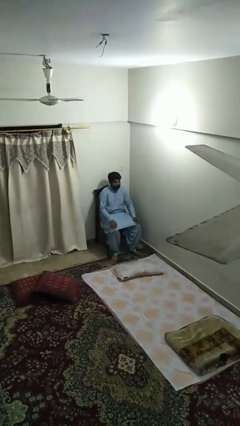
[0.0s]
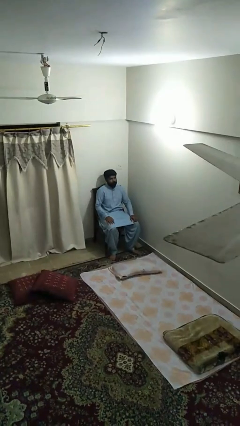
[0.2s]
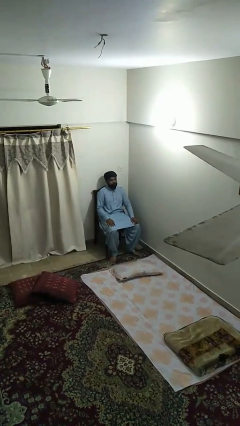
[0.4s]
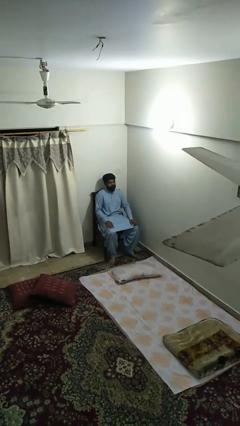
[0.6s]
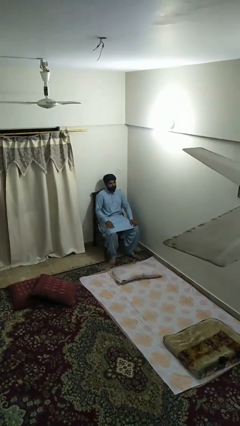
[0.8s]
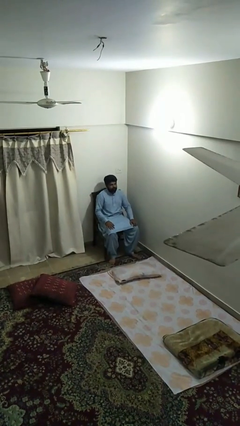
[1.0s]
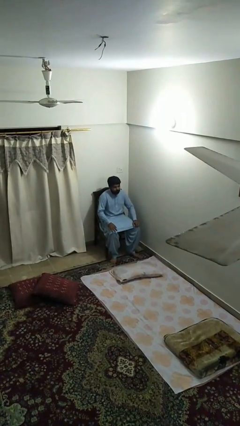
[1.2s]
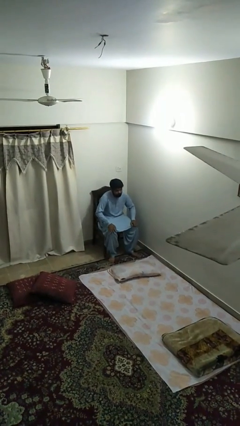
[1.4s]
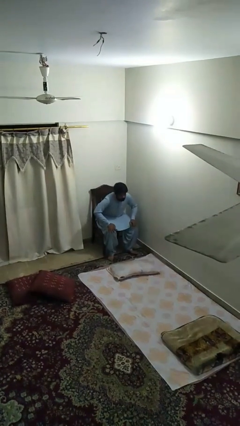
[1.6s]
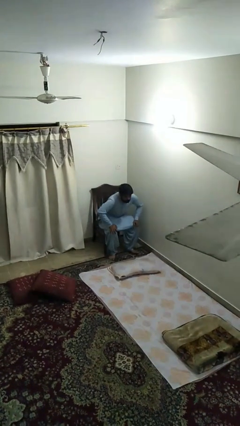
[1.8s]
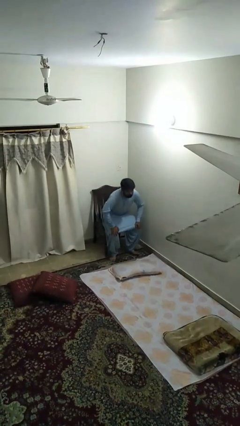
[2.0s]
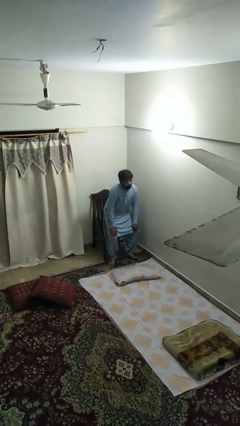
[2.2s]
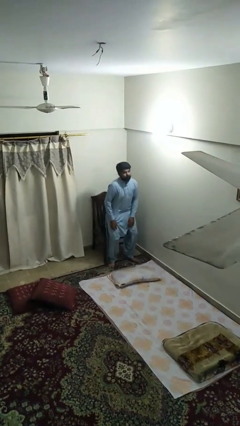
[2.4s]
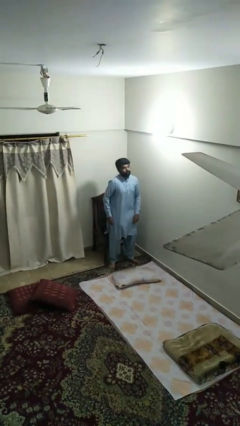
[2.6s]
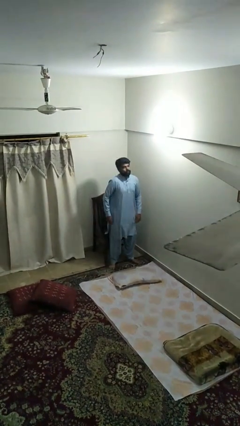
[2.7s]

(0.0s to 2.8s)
person stands up

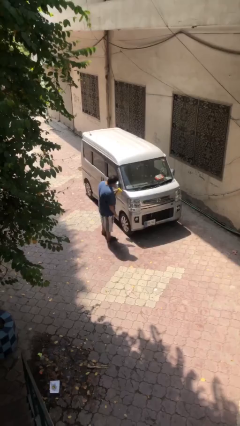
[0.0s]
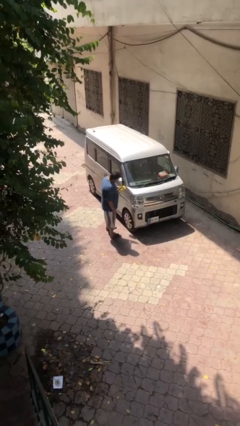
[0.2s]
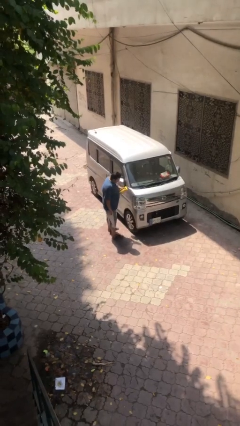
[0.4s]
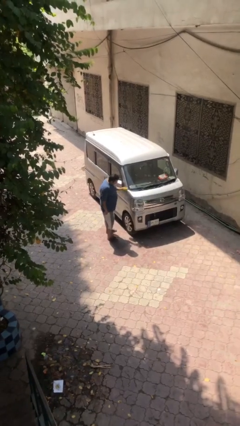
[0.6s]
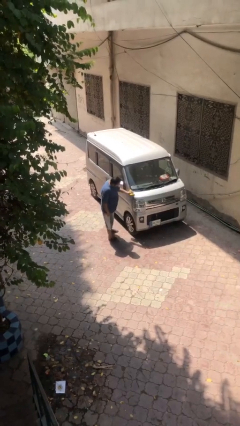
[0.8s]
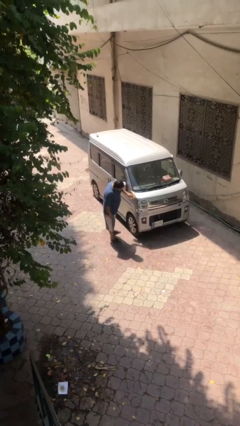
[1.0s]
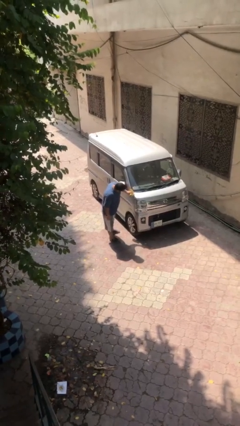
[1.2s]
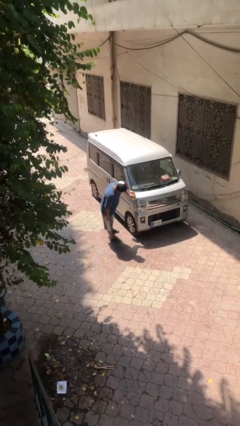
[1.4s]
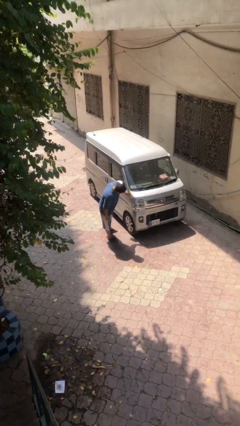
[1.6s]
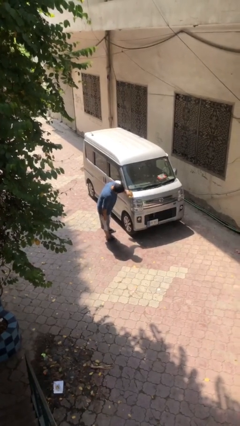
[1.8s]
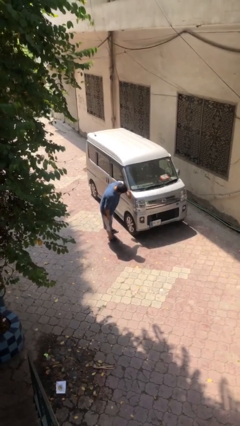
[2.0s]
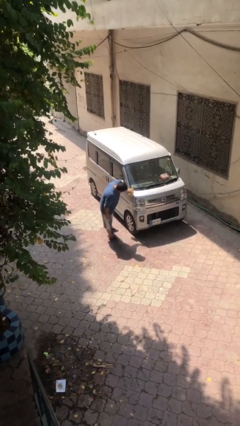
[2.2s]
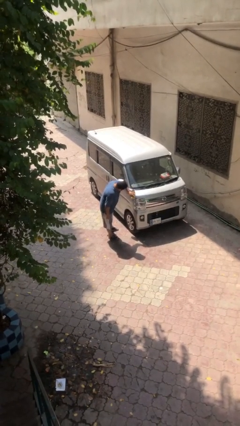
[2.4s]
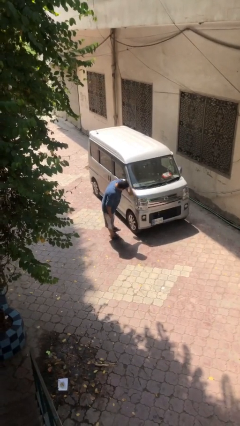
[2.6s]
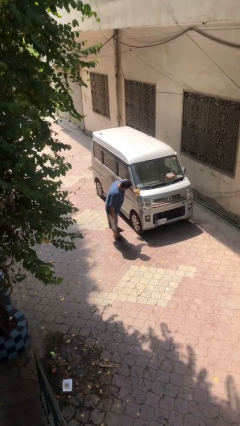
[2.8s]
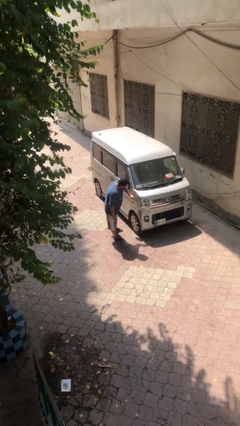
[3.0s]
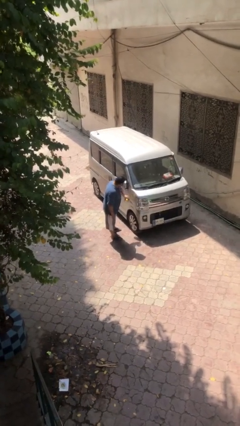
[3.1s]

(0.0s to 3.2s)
person polishes car with rag

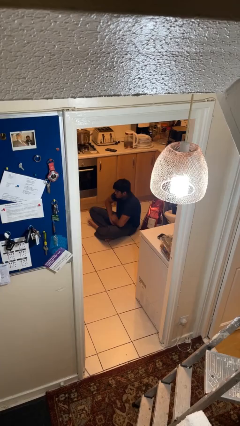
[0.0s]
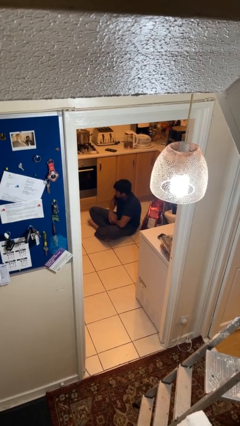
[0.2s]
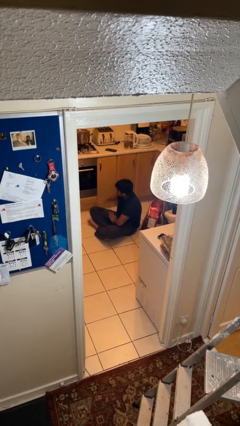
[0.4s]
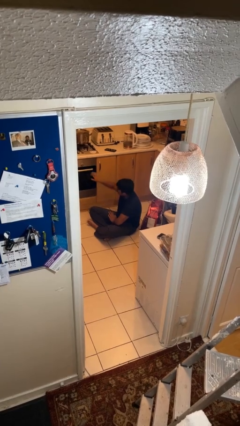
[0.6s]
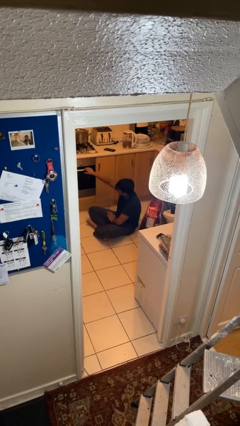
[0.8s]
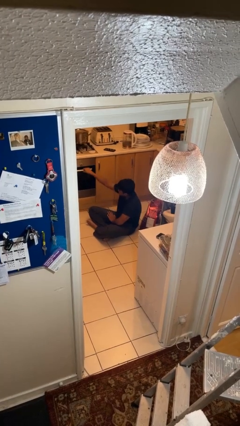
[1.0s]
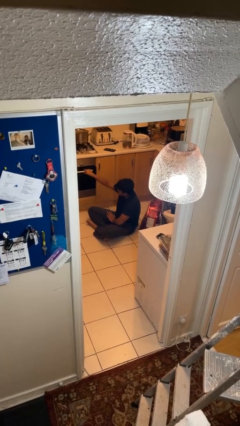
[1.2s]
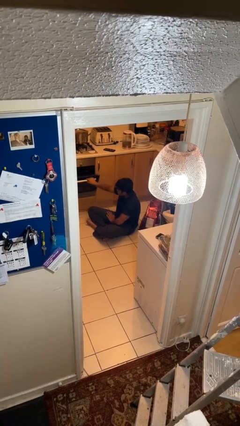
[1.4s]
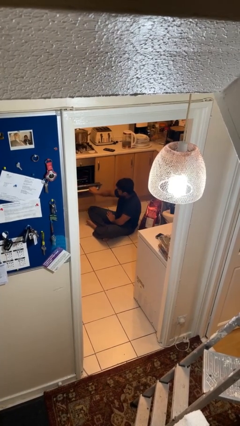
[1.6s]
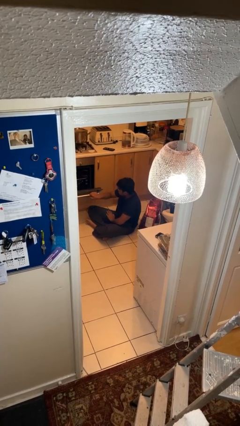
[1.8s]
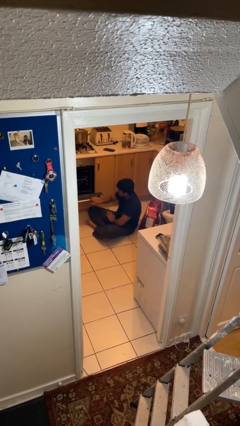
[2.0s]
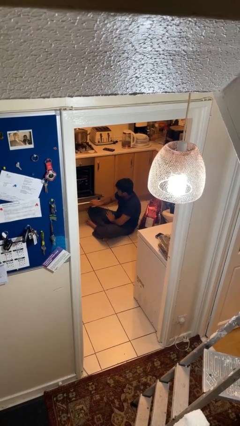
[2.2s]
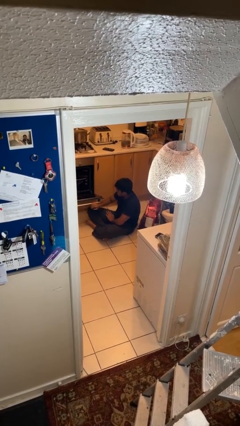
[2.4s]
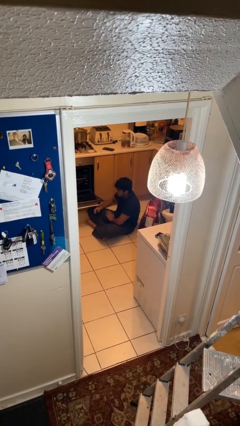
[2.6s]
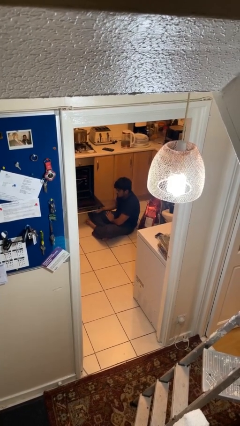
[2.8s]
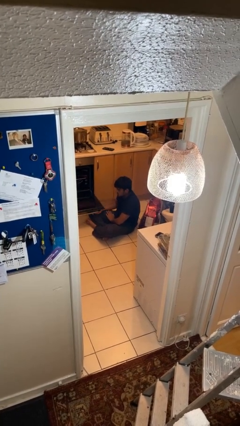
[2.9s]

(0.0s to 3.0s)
person opens oven door

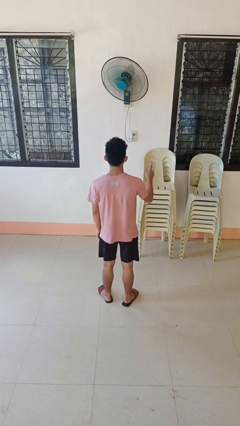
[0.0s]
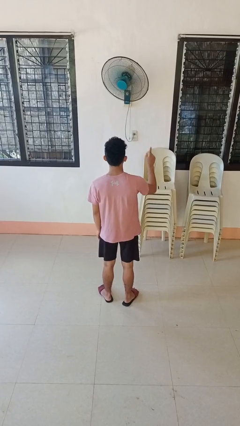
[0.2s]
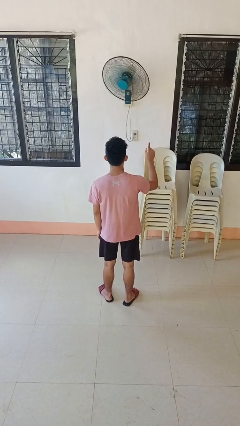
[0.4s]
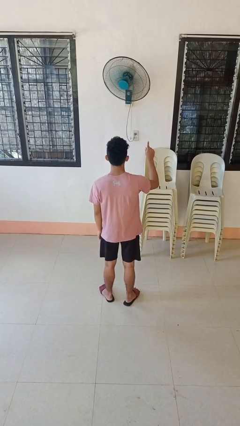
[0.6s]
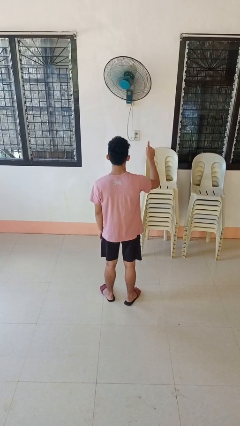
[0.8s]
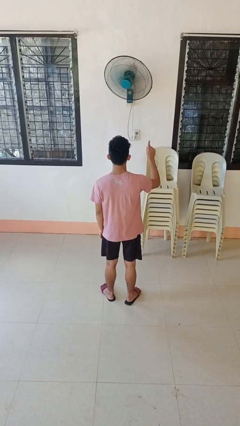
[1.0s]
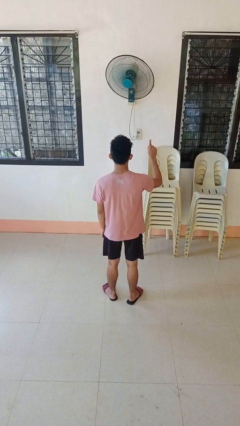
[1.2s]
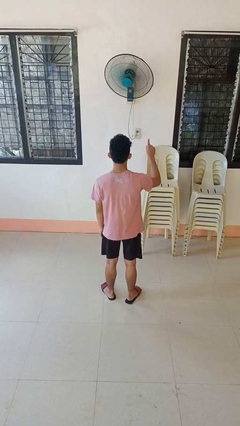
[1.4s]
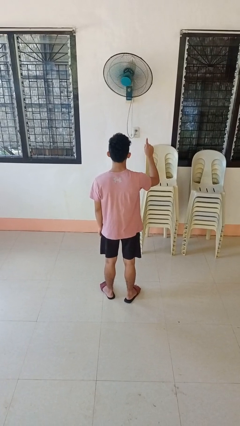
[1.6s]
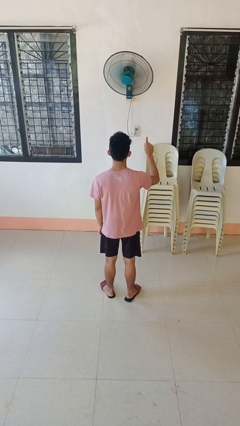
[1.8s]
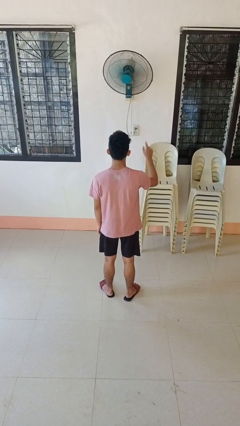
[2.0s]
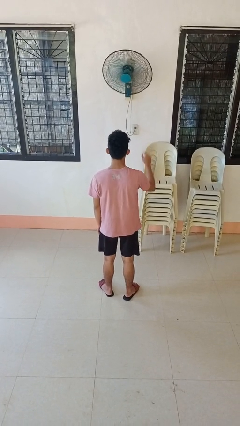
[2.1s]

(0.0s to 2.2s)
person gestures number one

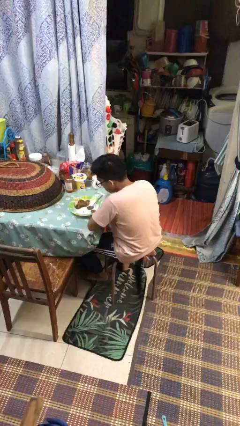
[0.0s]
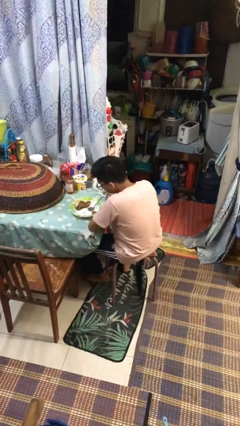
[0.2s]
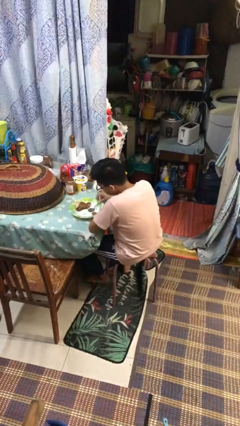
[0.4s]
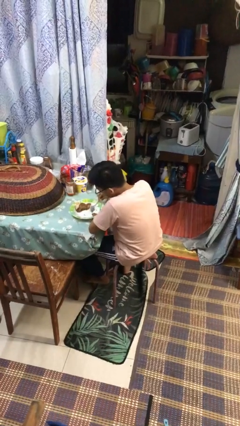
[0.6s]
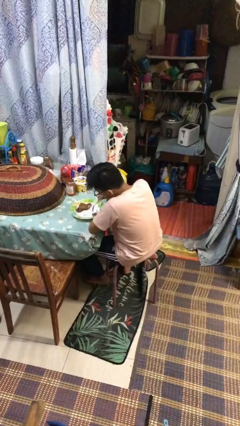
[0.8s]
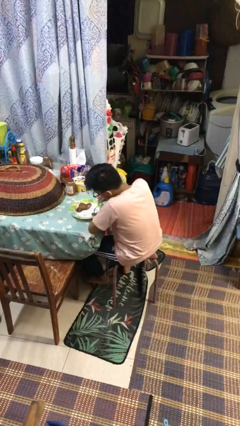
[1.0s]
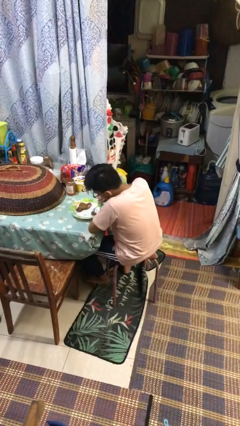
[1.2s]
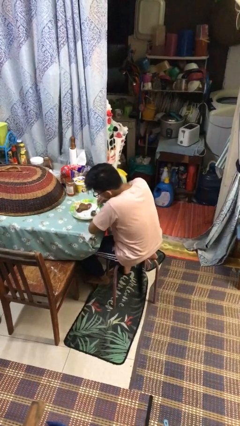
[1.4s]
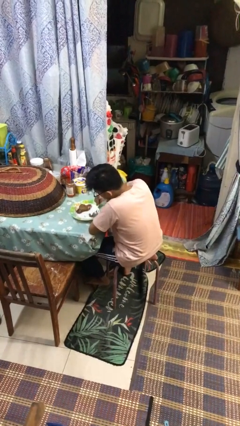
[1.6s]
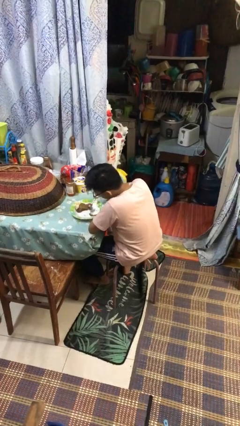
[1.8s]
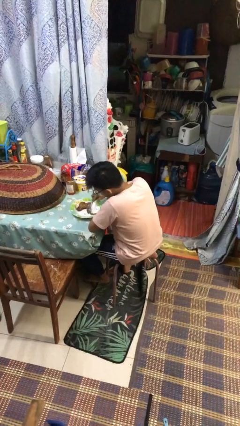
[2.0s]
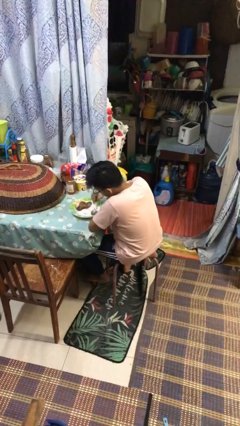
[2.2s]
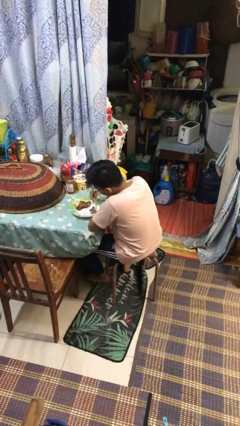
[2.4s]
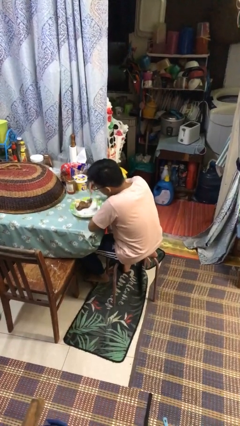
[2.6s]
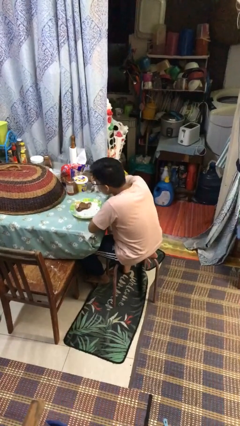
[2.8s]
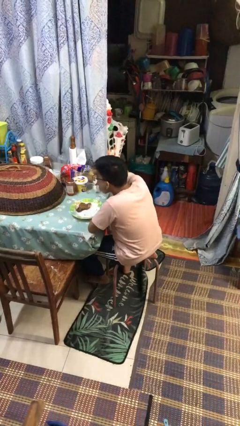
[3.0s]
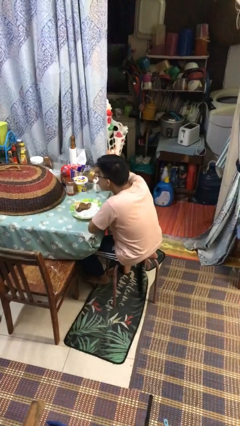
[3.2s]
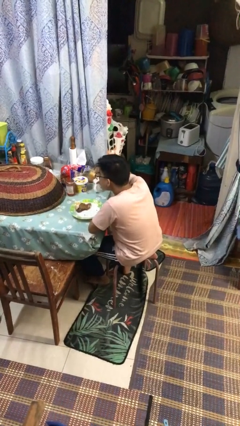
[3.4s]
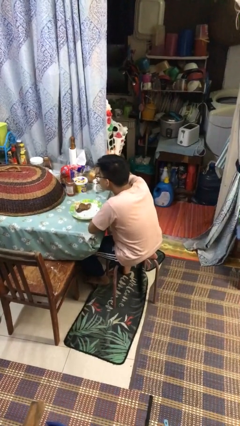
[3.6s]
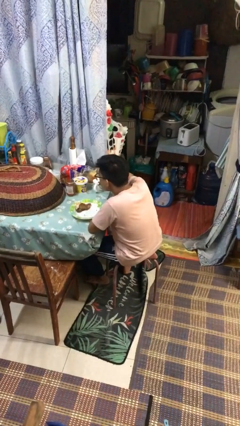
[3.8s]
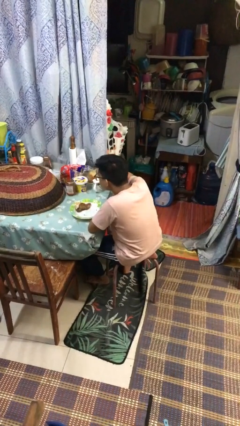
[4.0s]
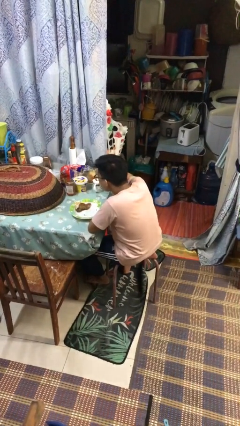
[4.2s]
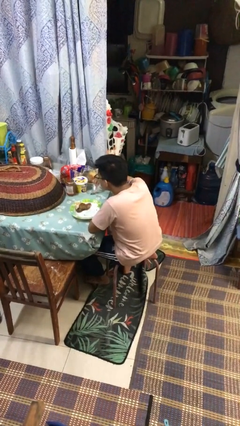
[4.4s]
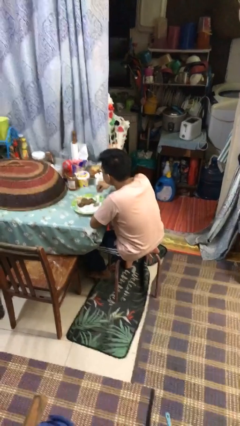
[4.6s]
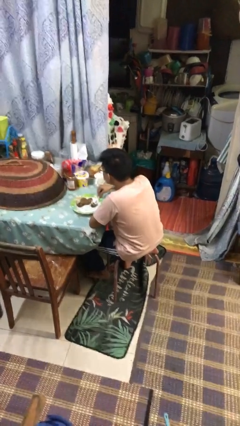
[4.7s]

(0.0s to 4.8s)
person eats with utensil

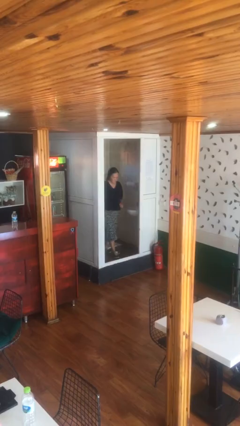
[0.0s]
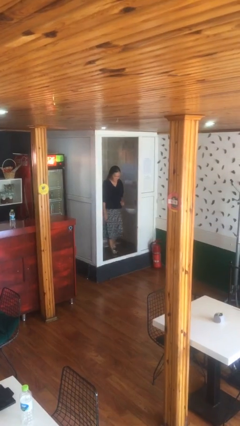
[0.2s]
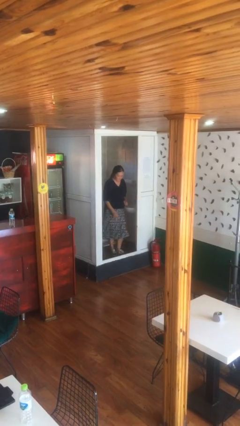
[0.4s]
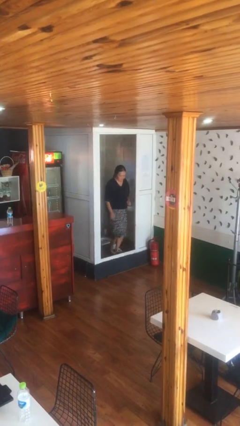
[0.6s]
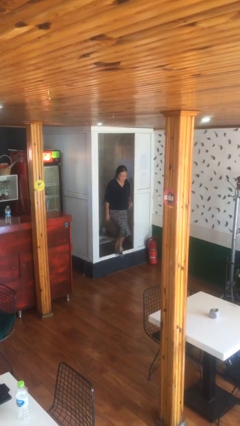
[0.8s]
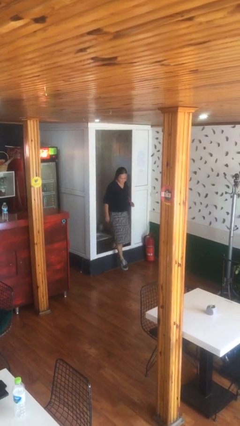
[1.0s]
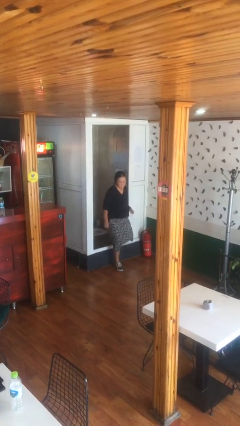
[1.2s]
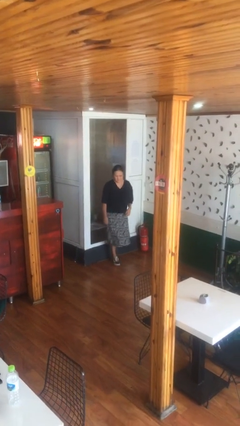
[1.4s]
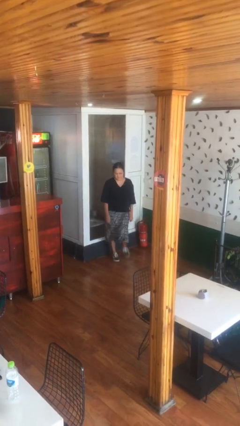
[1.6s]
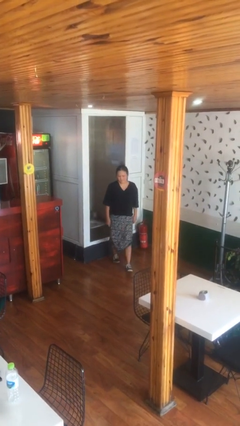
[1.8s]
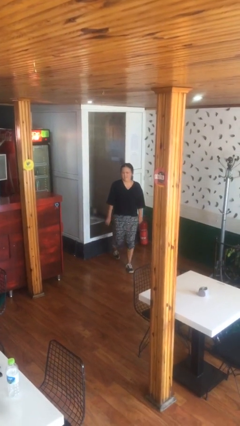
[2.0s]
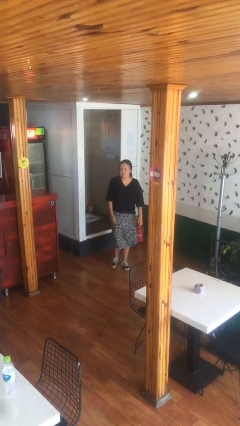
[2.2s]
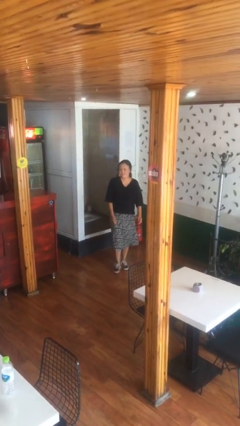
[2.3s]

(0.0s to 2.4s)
person enters scene through structure
